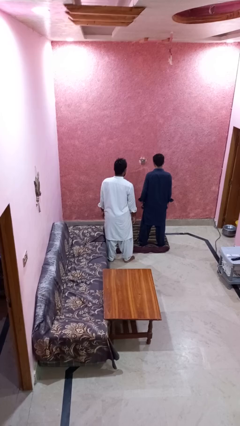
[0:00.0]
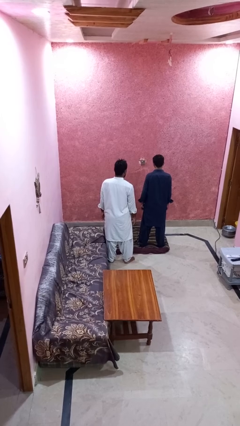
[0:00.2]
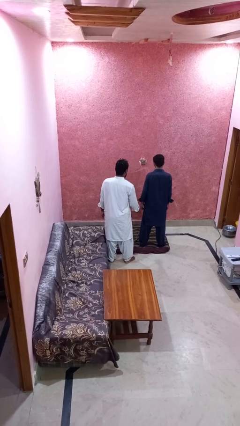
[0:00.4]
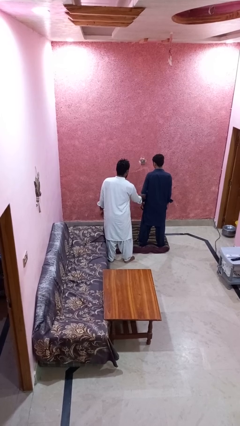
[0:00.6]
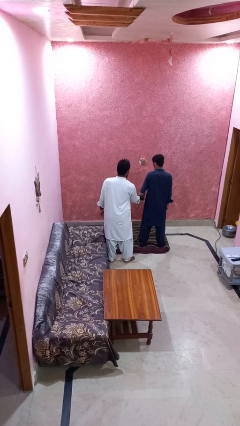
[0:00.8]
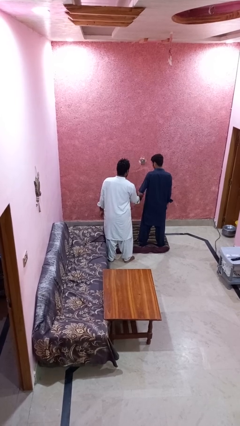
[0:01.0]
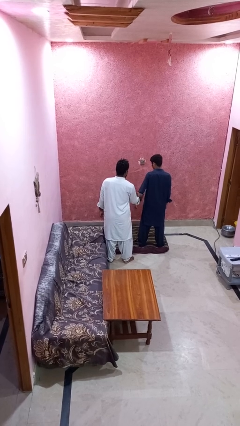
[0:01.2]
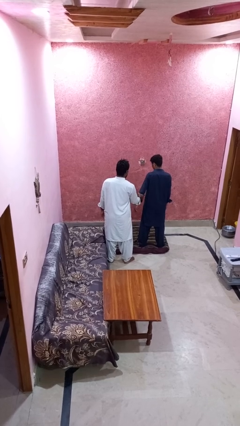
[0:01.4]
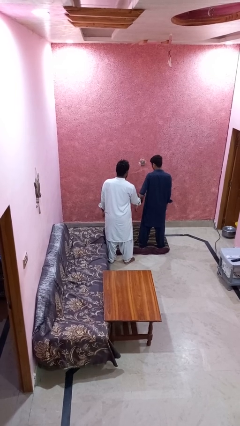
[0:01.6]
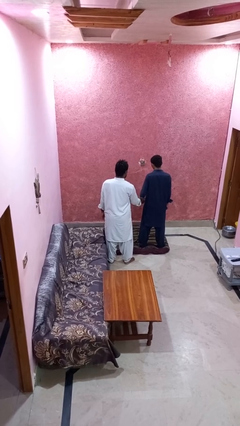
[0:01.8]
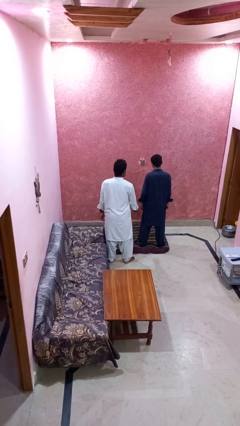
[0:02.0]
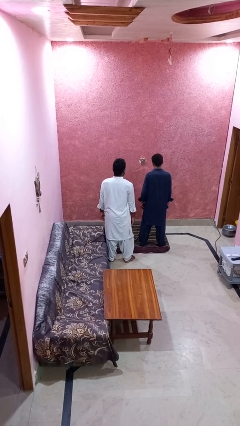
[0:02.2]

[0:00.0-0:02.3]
person grabs person by bicep

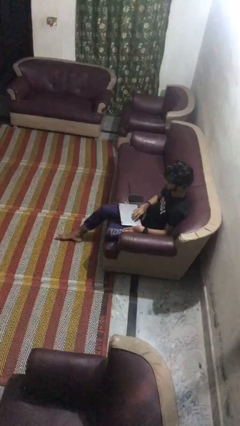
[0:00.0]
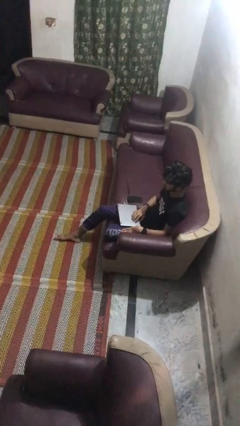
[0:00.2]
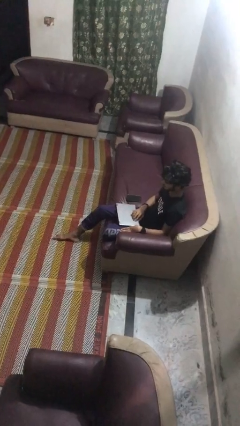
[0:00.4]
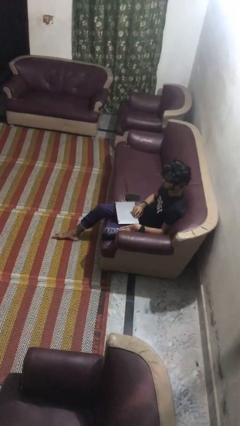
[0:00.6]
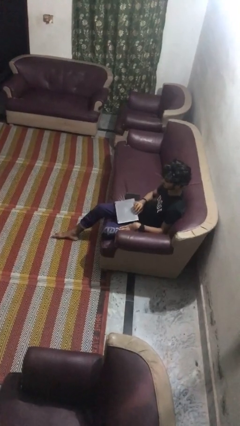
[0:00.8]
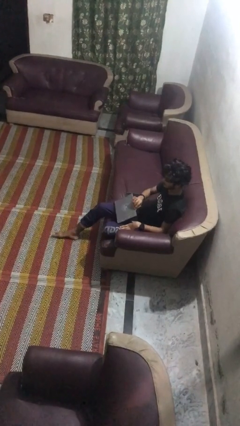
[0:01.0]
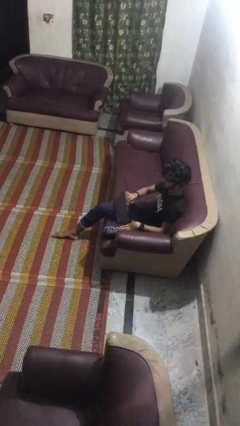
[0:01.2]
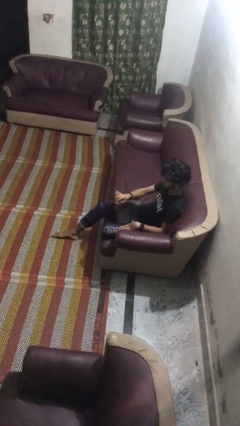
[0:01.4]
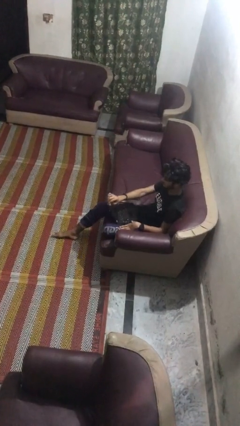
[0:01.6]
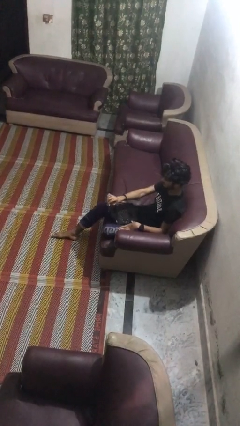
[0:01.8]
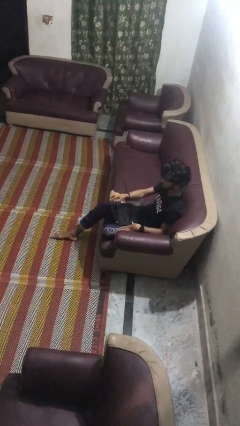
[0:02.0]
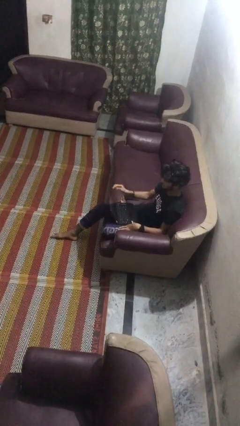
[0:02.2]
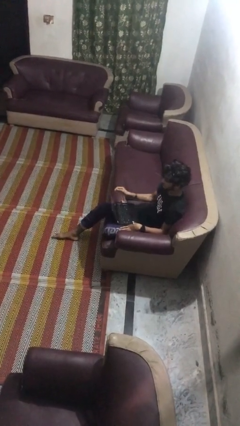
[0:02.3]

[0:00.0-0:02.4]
person opens laptop

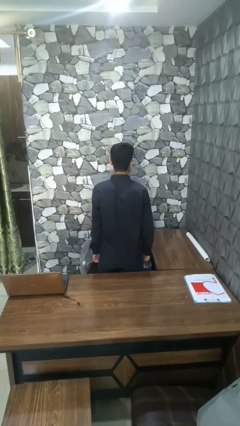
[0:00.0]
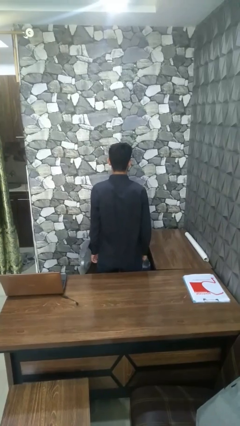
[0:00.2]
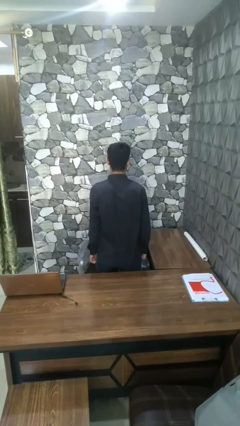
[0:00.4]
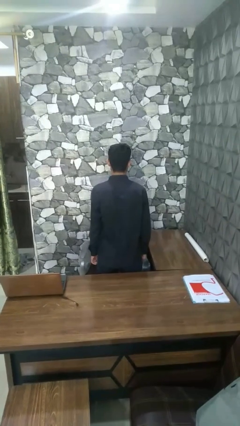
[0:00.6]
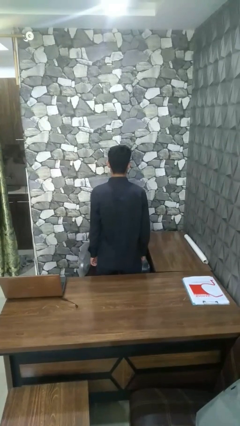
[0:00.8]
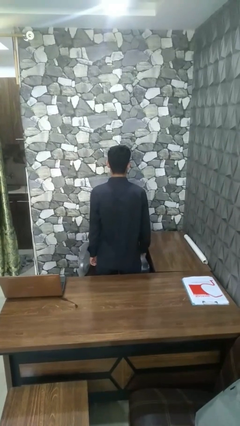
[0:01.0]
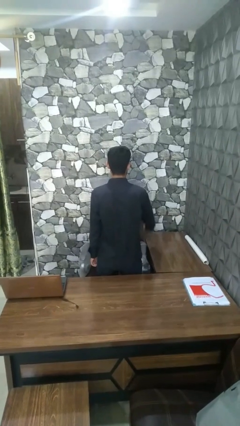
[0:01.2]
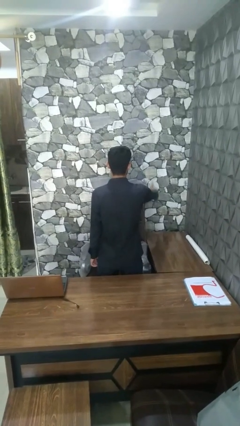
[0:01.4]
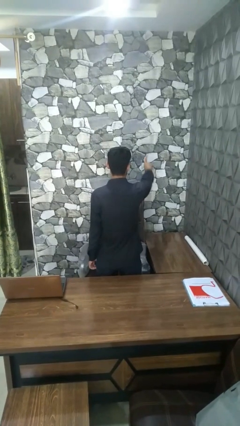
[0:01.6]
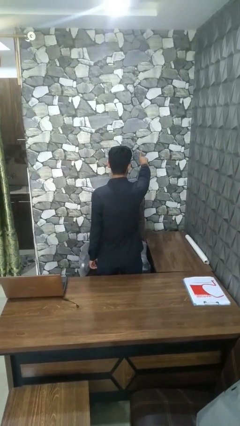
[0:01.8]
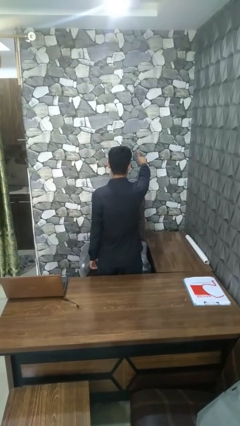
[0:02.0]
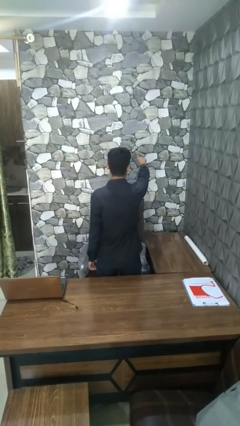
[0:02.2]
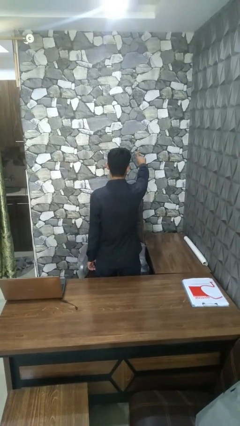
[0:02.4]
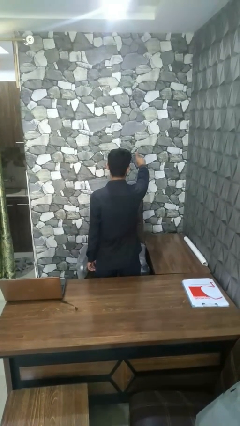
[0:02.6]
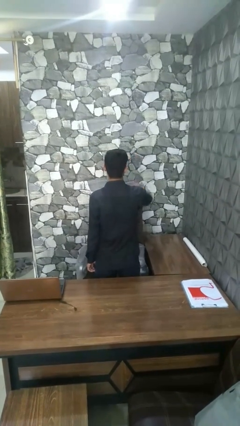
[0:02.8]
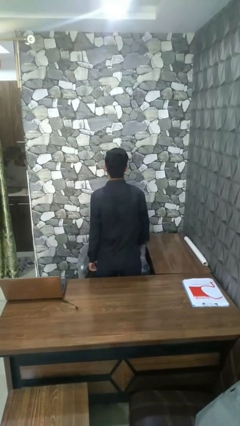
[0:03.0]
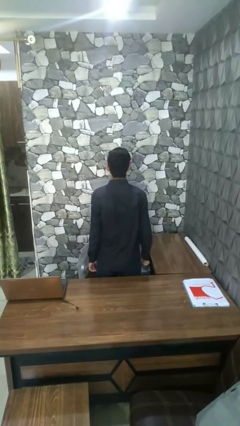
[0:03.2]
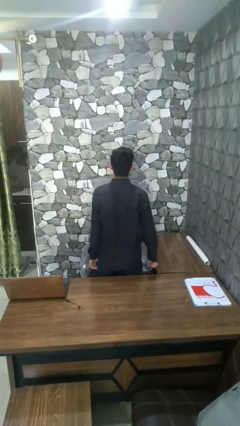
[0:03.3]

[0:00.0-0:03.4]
person gestures number one

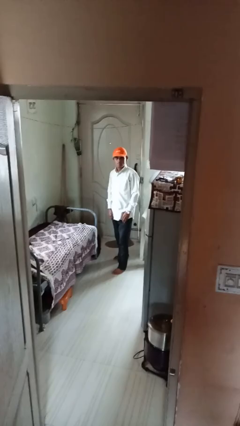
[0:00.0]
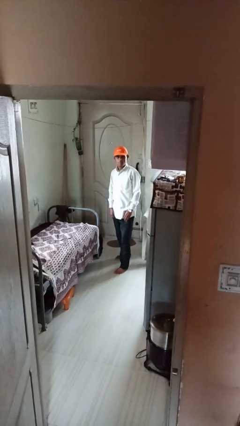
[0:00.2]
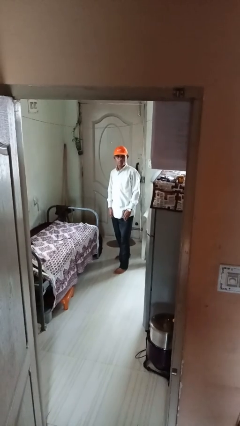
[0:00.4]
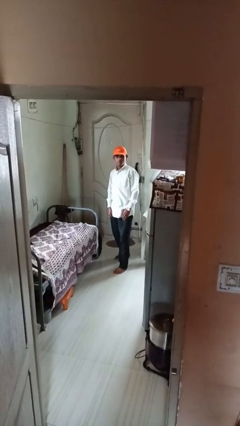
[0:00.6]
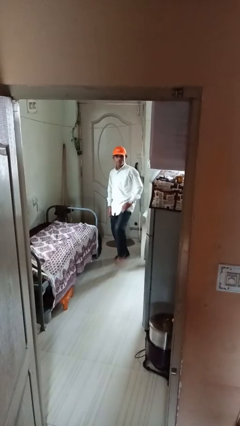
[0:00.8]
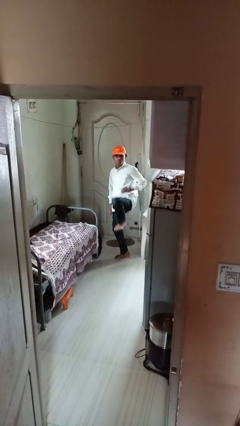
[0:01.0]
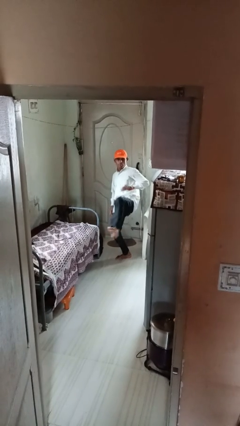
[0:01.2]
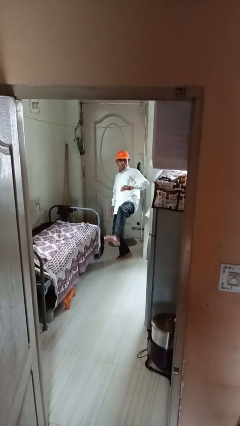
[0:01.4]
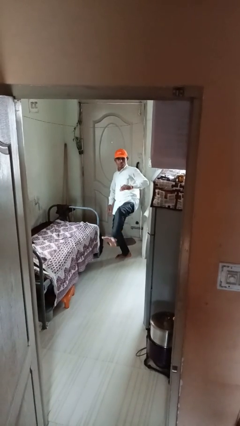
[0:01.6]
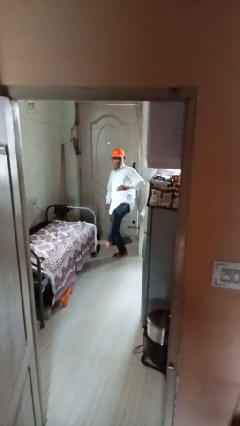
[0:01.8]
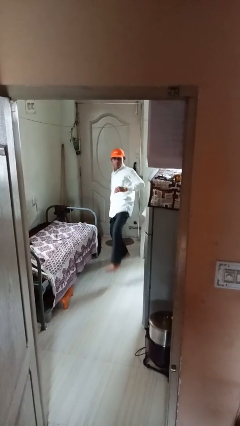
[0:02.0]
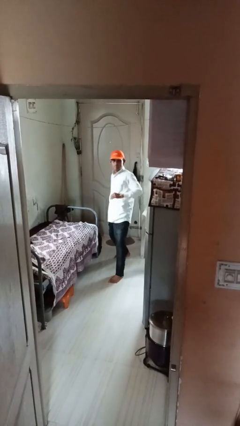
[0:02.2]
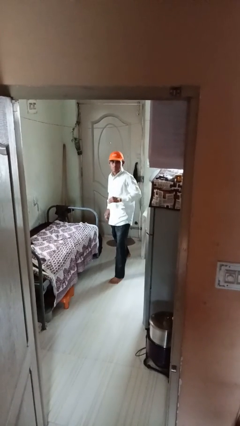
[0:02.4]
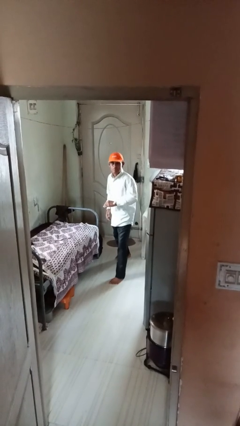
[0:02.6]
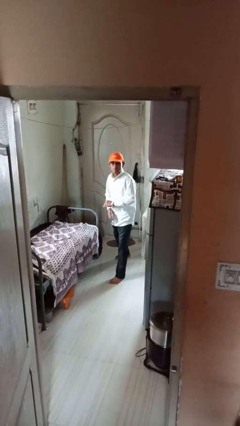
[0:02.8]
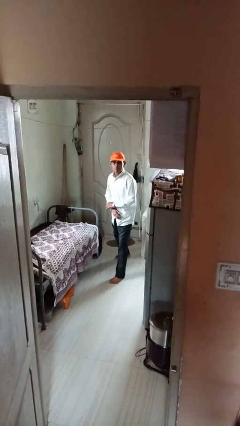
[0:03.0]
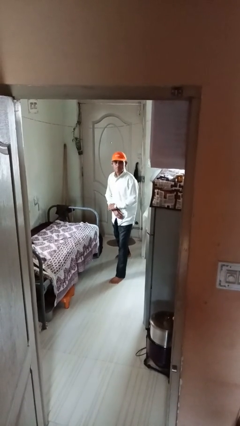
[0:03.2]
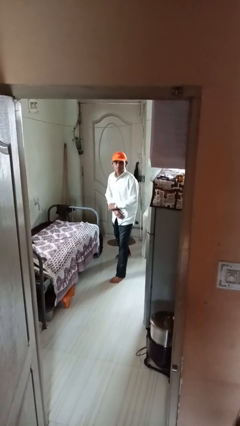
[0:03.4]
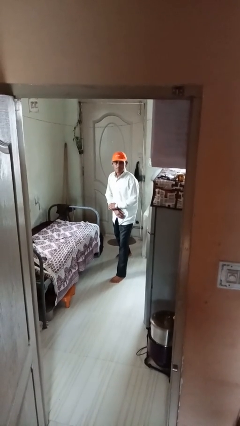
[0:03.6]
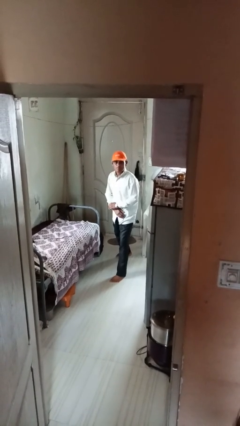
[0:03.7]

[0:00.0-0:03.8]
person karate kicks

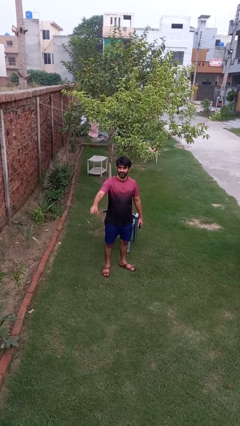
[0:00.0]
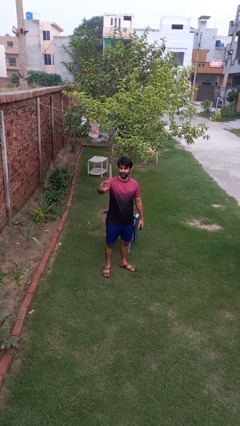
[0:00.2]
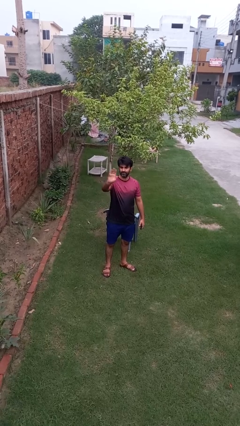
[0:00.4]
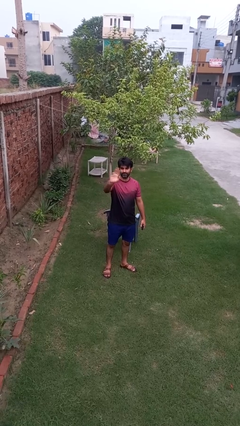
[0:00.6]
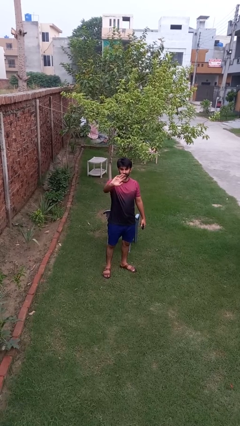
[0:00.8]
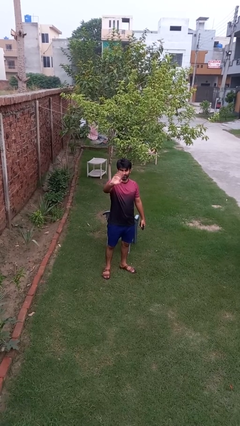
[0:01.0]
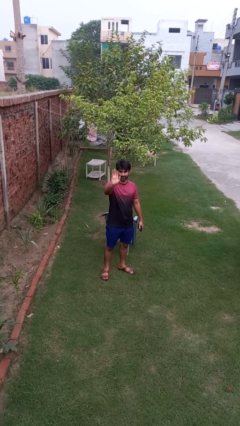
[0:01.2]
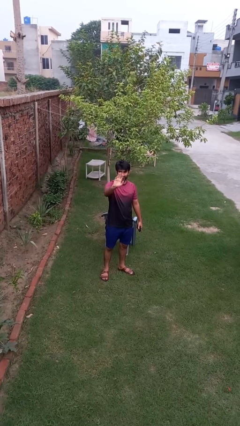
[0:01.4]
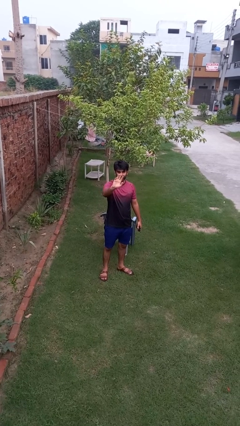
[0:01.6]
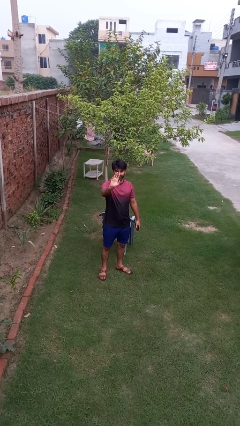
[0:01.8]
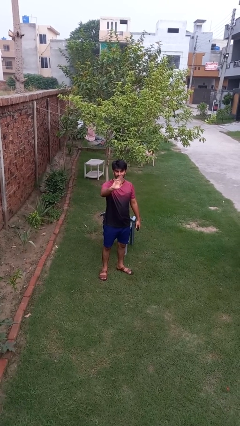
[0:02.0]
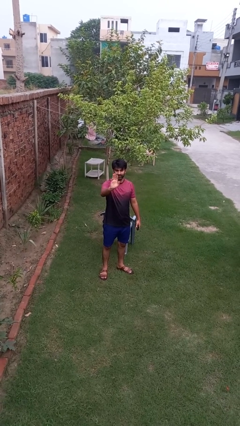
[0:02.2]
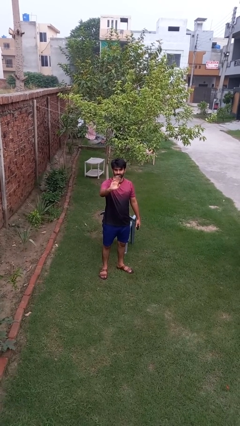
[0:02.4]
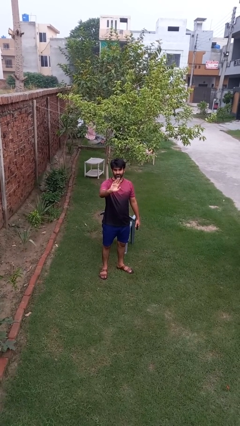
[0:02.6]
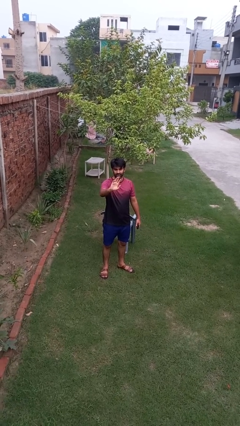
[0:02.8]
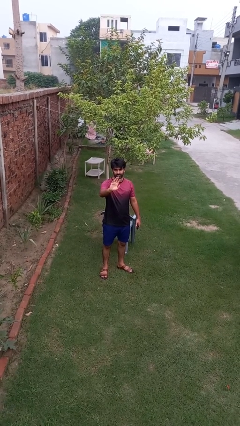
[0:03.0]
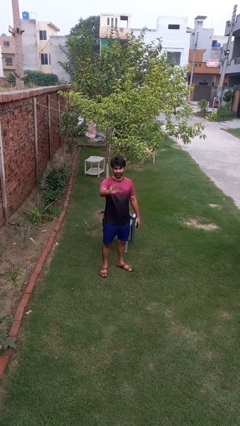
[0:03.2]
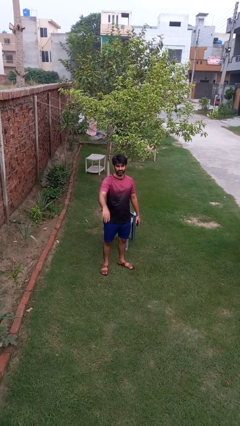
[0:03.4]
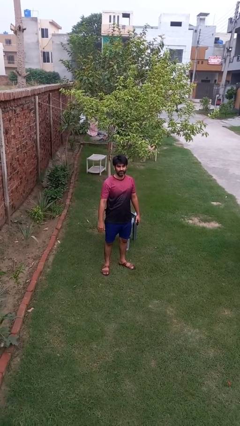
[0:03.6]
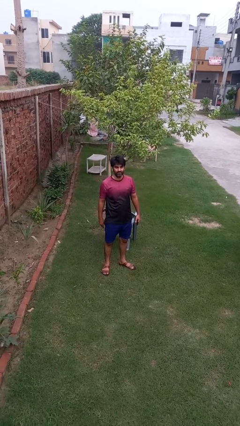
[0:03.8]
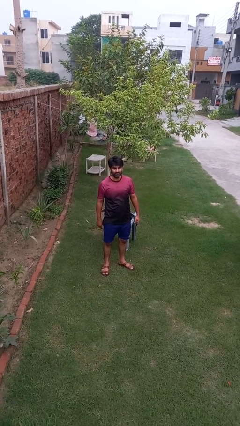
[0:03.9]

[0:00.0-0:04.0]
person waves at person

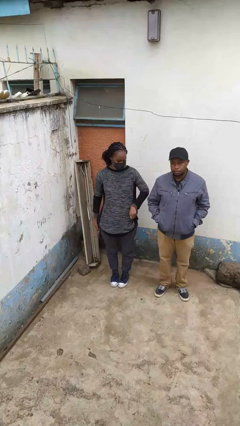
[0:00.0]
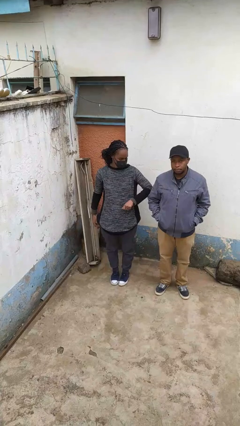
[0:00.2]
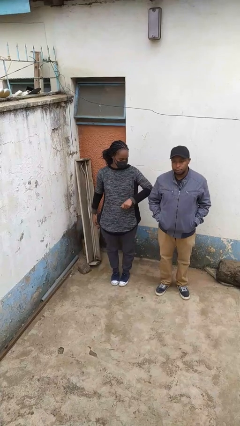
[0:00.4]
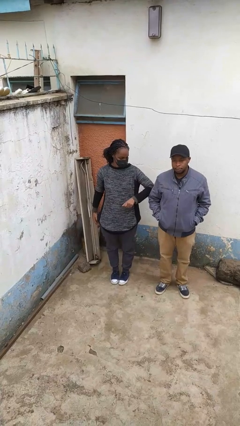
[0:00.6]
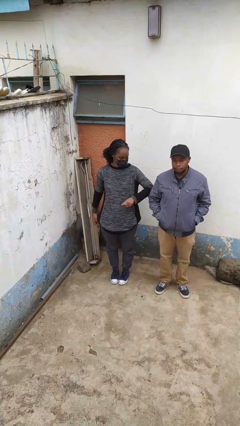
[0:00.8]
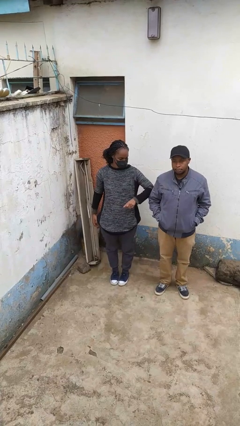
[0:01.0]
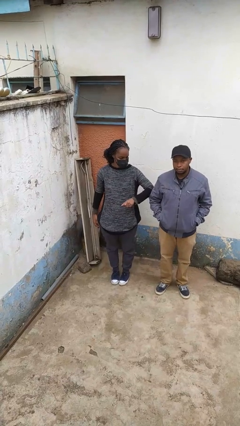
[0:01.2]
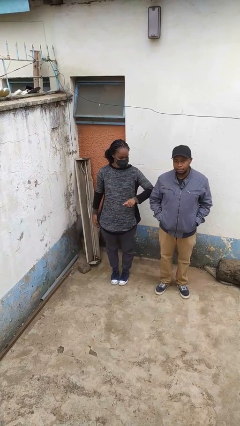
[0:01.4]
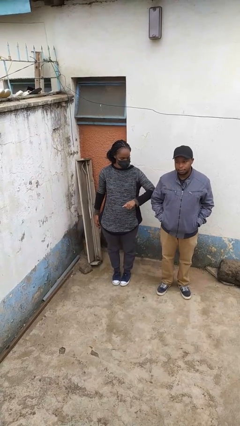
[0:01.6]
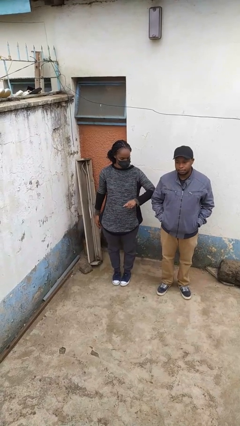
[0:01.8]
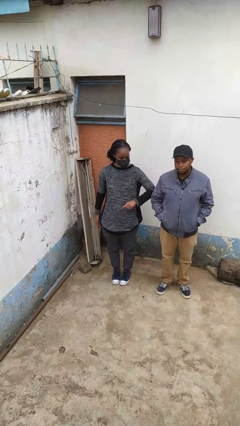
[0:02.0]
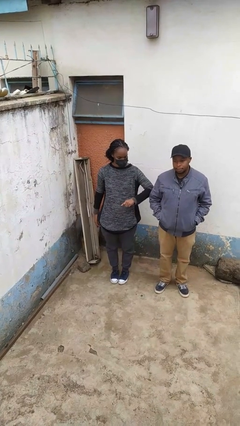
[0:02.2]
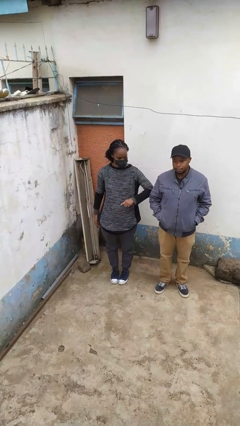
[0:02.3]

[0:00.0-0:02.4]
person nudges person with elbow
